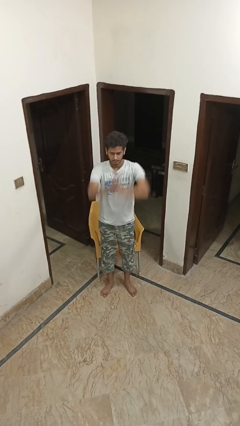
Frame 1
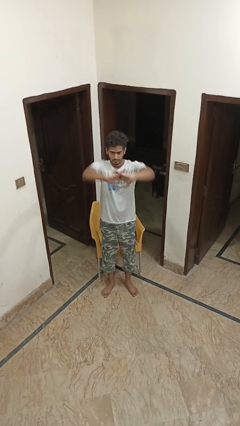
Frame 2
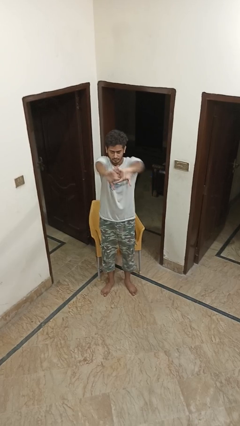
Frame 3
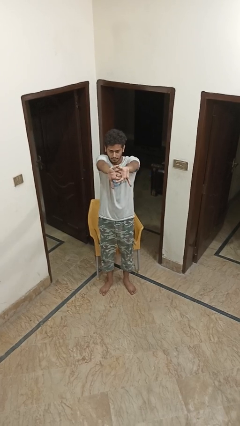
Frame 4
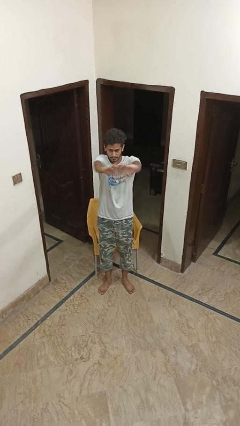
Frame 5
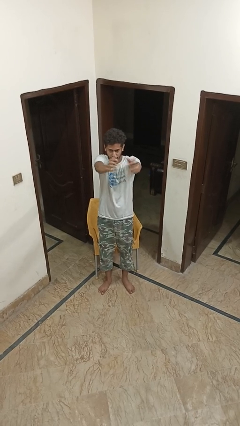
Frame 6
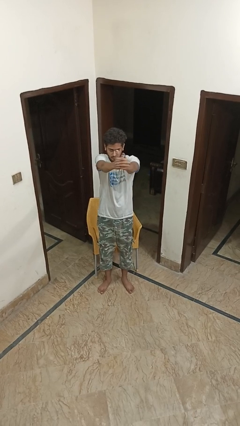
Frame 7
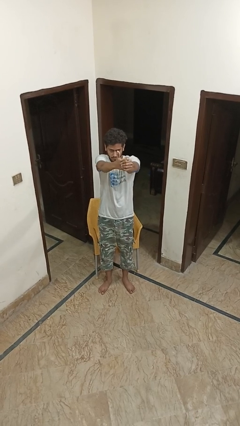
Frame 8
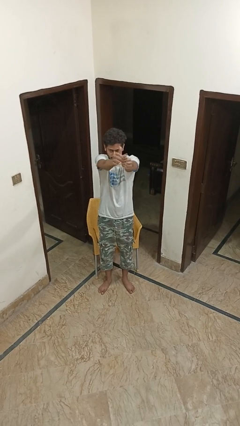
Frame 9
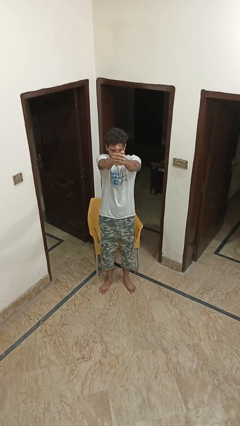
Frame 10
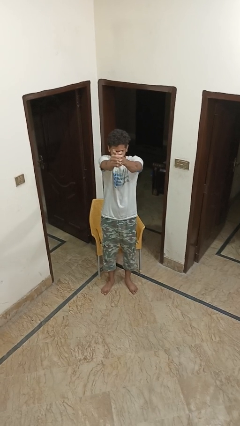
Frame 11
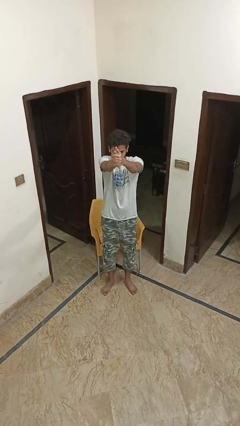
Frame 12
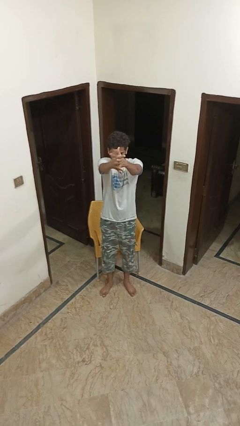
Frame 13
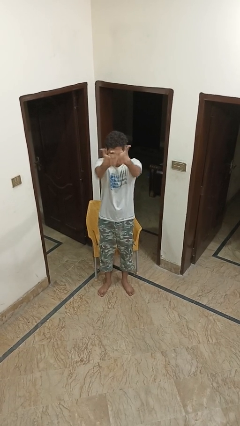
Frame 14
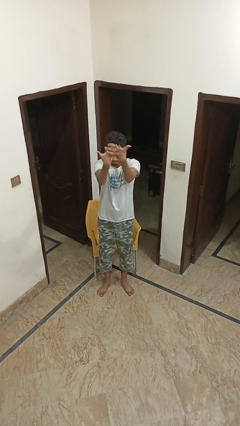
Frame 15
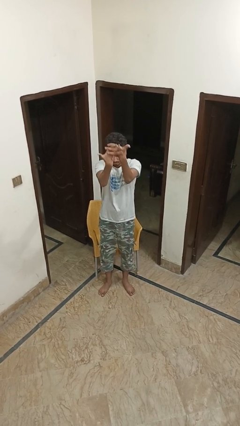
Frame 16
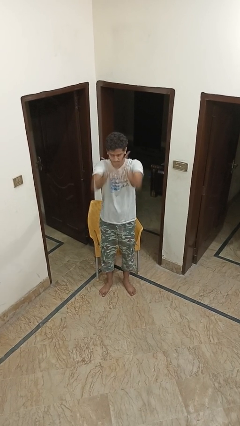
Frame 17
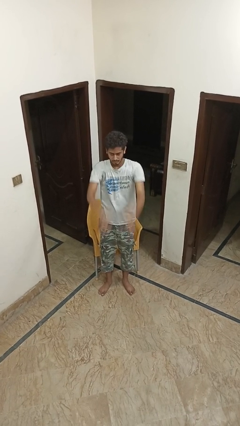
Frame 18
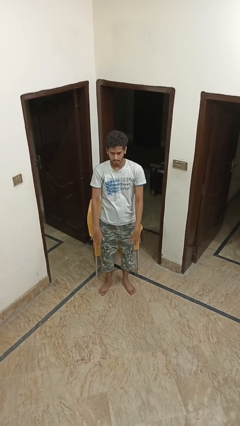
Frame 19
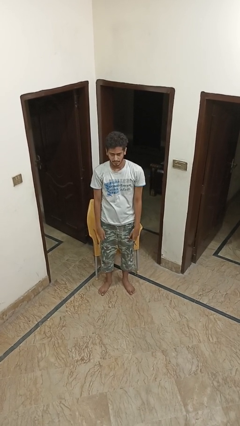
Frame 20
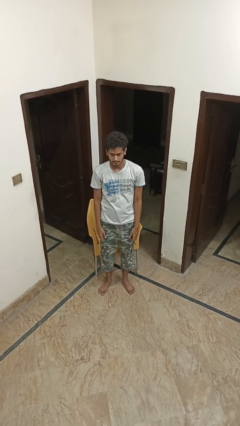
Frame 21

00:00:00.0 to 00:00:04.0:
person cracks knuckles

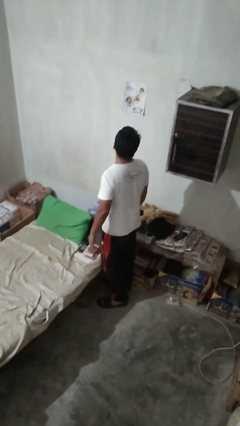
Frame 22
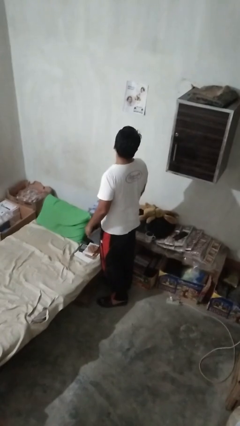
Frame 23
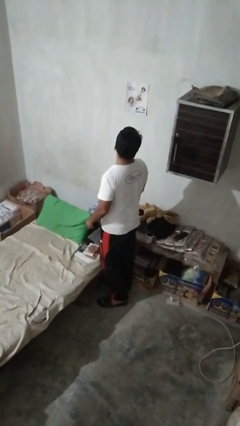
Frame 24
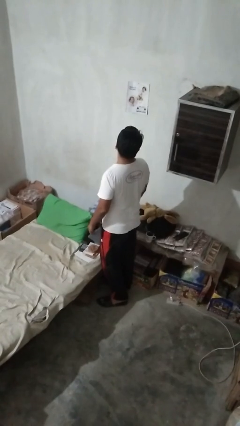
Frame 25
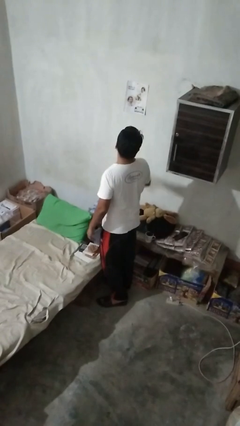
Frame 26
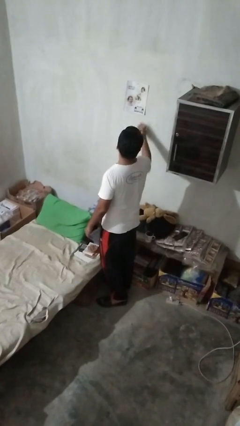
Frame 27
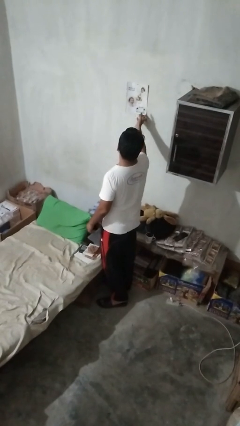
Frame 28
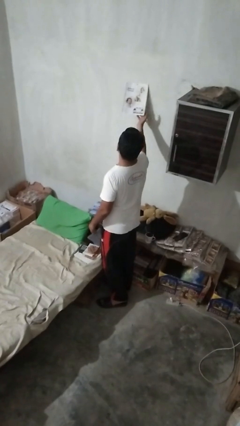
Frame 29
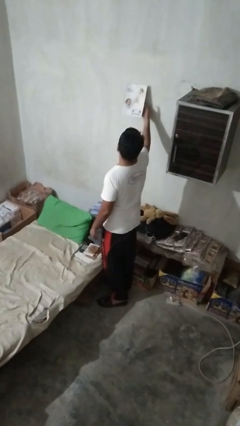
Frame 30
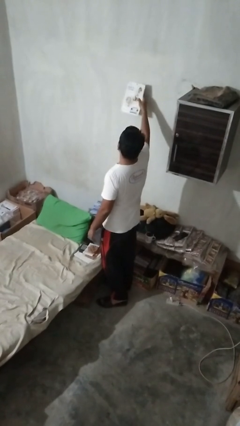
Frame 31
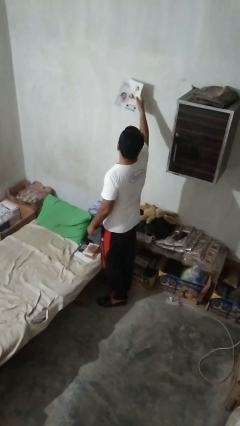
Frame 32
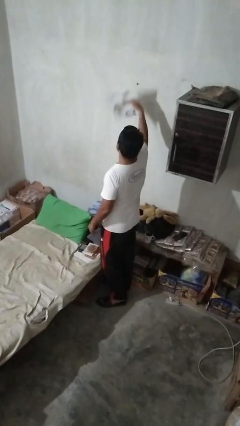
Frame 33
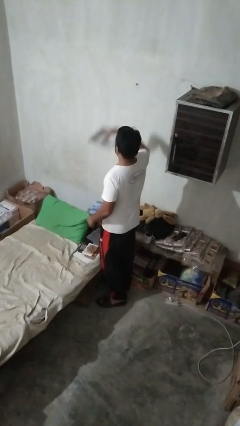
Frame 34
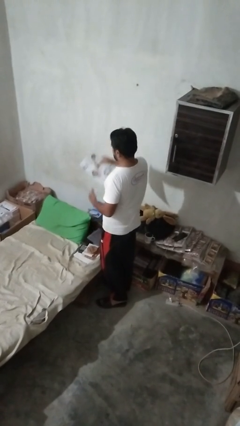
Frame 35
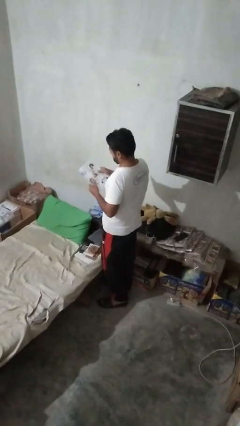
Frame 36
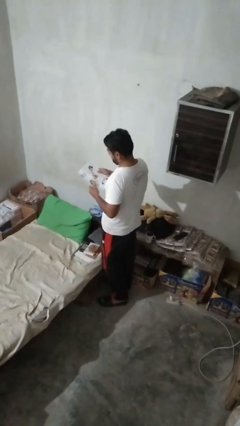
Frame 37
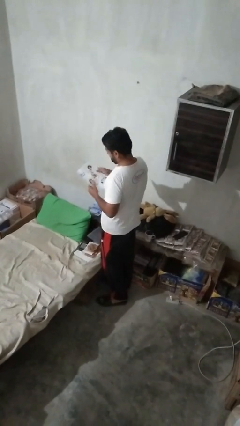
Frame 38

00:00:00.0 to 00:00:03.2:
person takes down picture frame

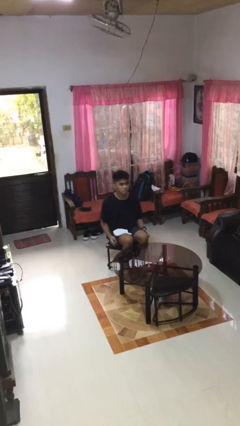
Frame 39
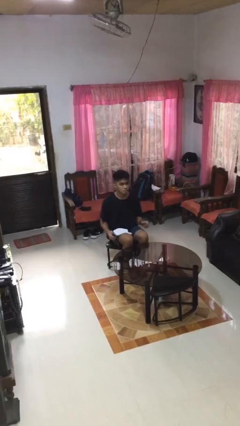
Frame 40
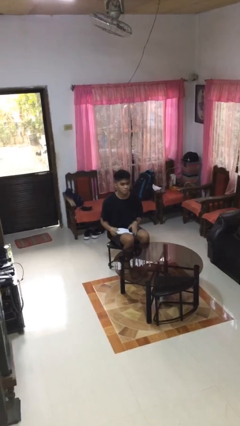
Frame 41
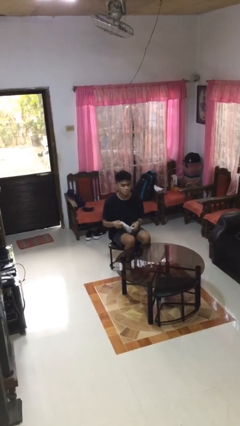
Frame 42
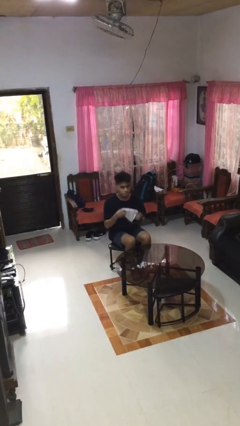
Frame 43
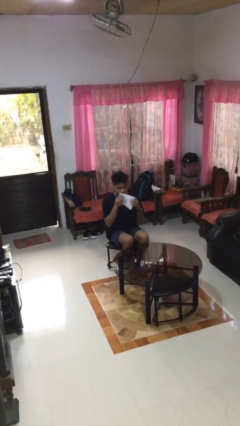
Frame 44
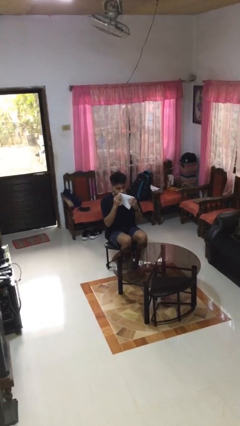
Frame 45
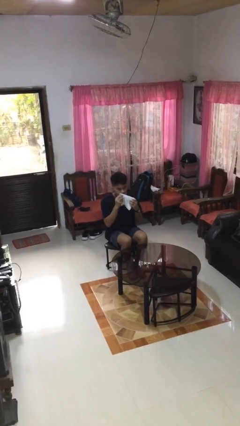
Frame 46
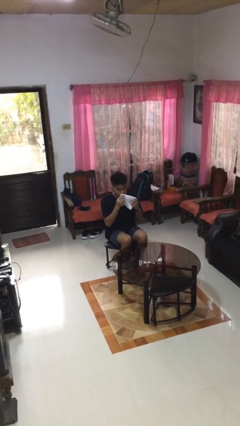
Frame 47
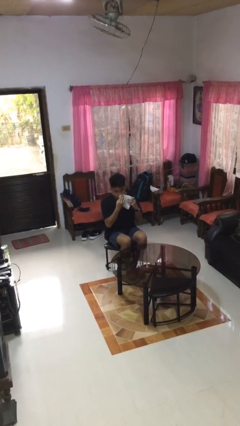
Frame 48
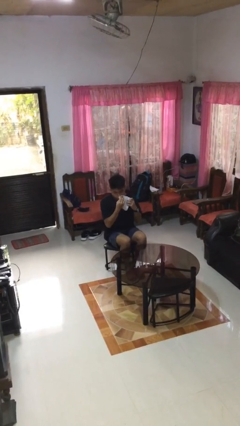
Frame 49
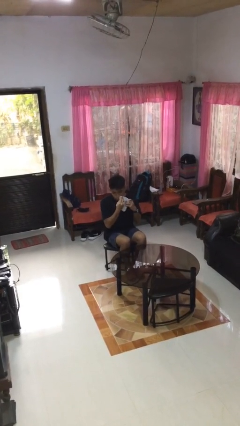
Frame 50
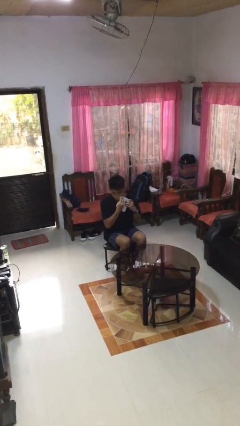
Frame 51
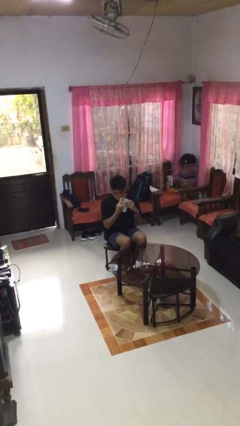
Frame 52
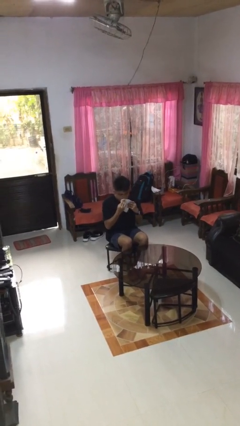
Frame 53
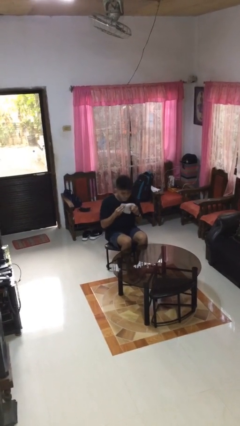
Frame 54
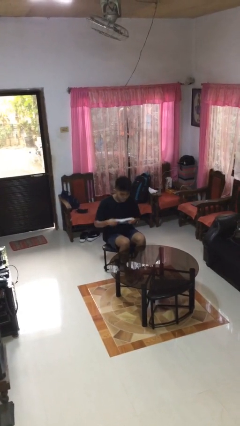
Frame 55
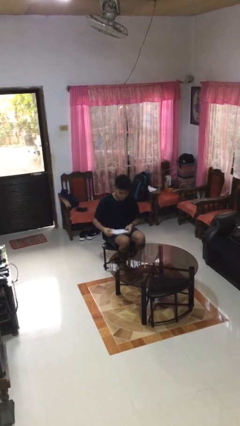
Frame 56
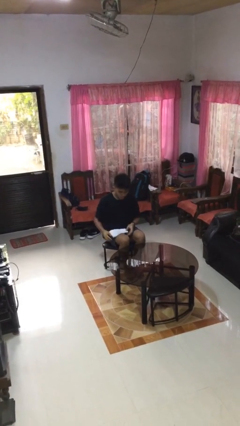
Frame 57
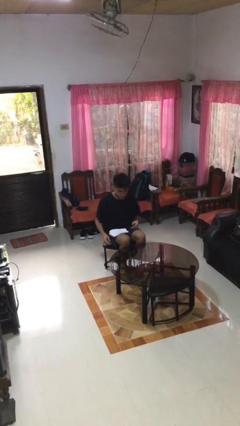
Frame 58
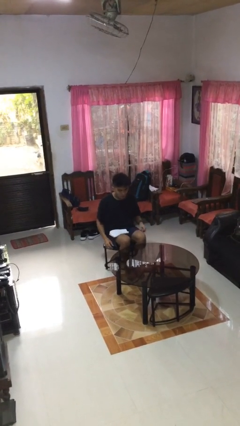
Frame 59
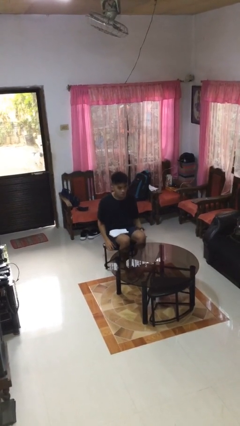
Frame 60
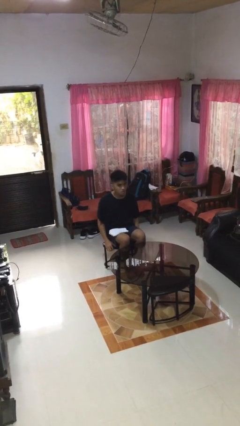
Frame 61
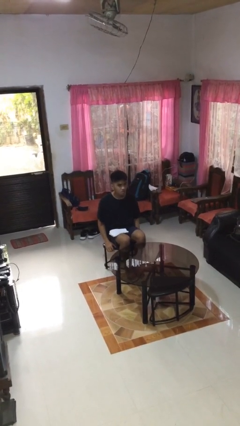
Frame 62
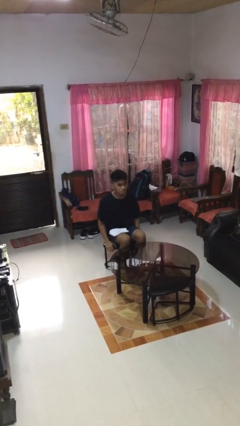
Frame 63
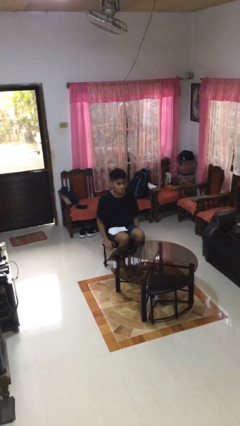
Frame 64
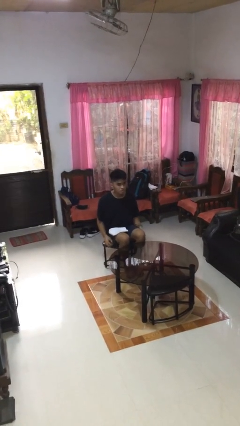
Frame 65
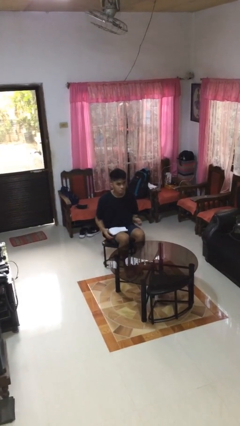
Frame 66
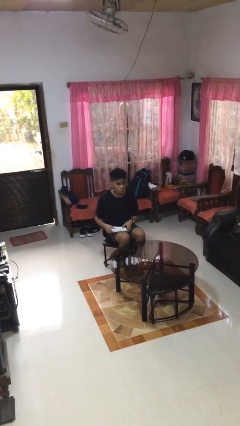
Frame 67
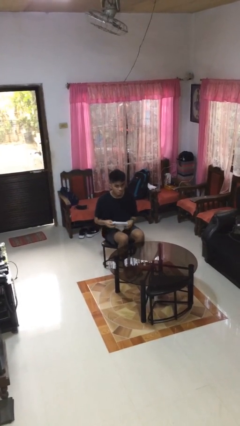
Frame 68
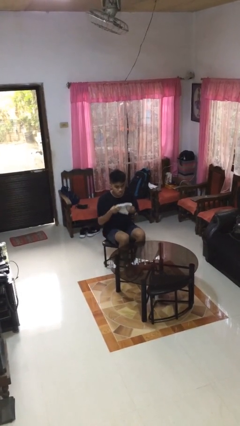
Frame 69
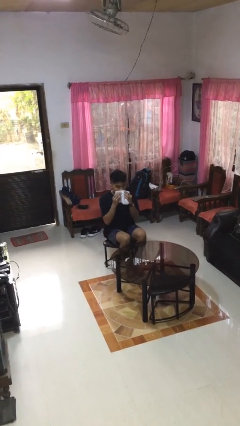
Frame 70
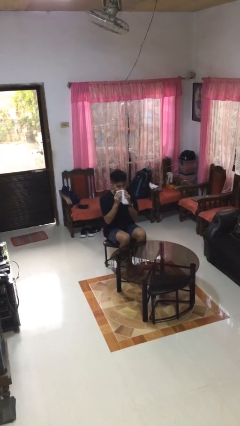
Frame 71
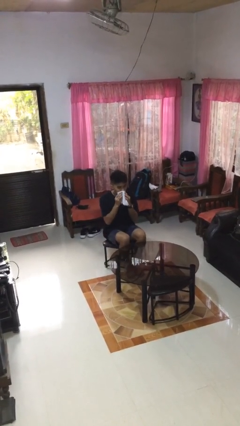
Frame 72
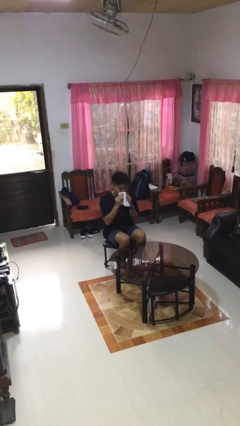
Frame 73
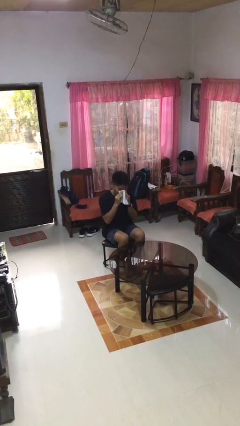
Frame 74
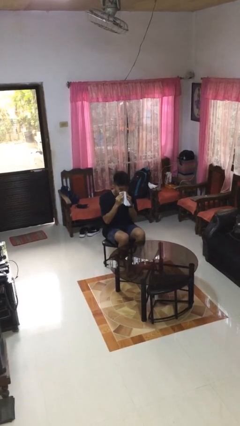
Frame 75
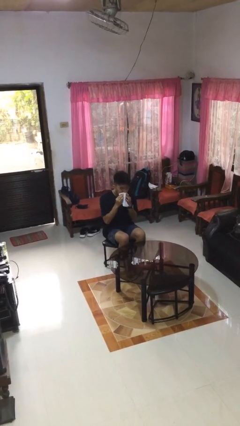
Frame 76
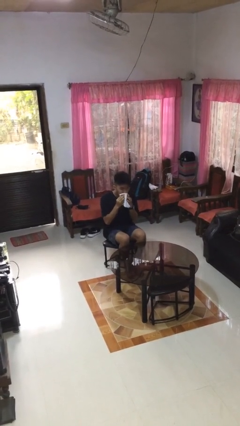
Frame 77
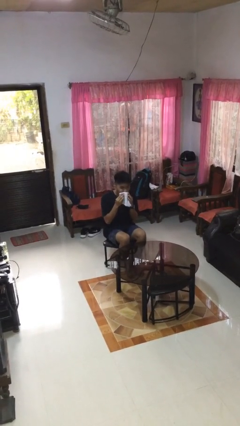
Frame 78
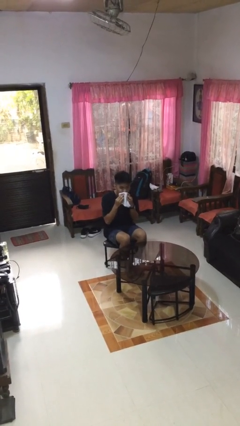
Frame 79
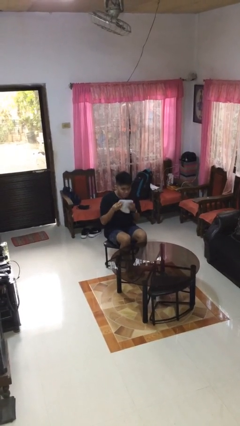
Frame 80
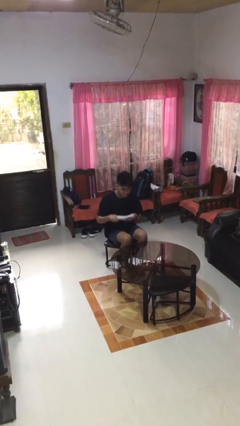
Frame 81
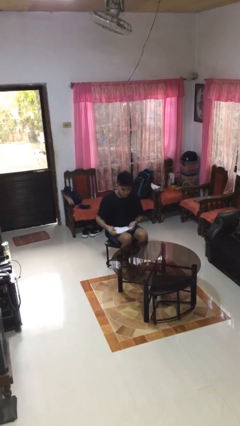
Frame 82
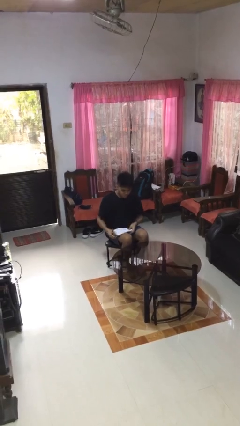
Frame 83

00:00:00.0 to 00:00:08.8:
person wipes mouth with napkin

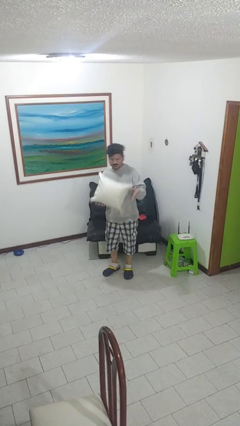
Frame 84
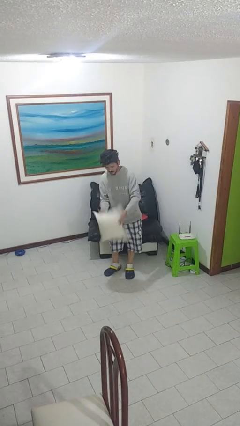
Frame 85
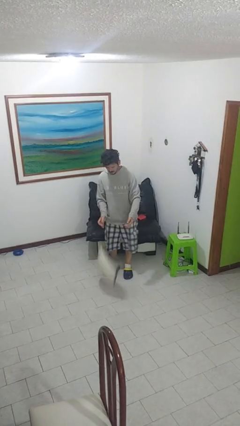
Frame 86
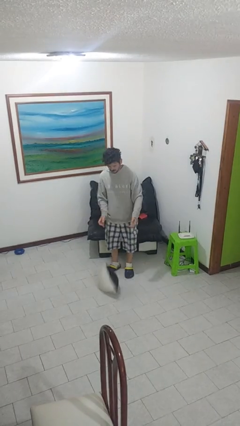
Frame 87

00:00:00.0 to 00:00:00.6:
person drops object

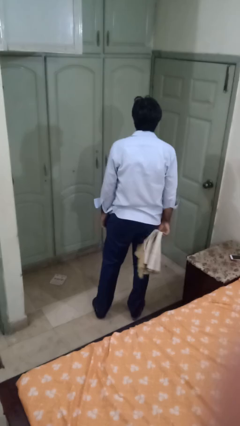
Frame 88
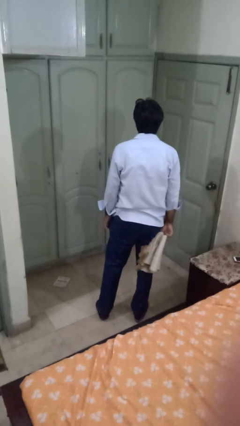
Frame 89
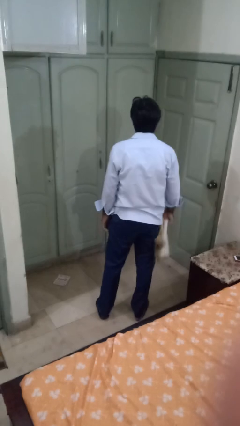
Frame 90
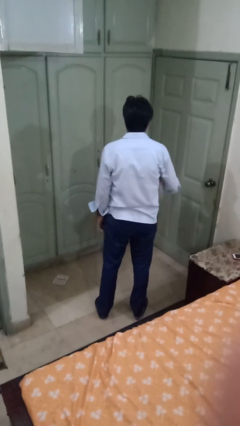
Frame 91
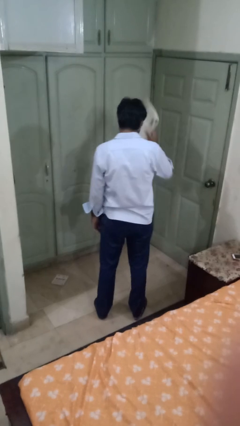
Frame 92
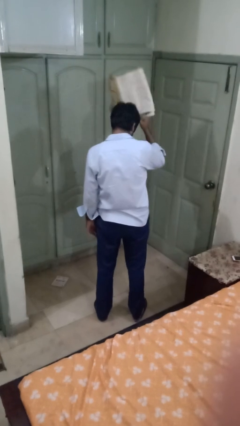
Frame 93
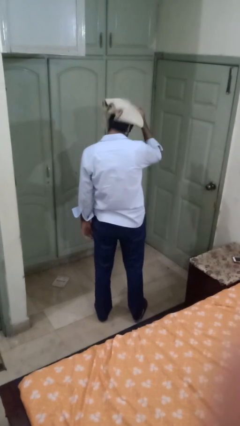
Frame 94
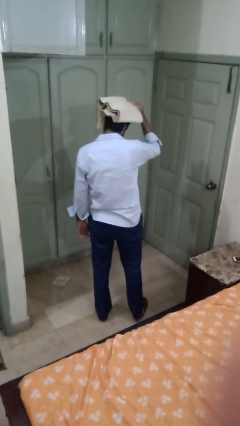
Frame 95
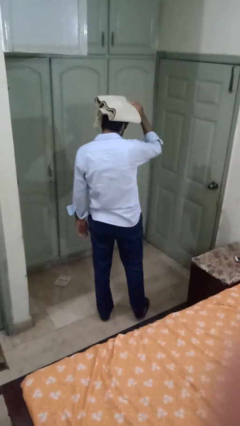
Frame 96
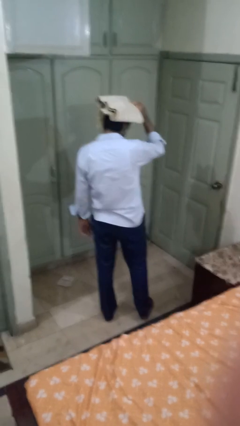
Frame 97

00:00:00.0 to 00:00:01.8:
person holds object above head
